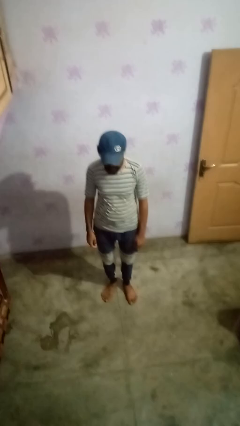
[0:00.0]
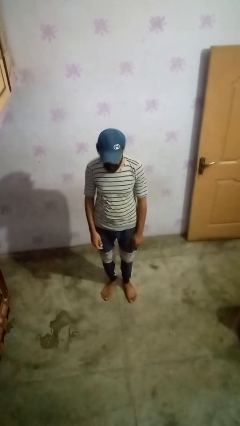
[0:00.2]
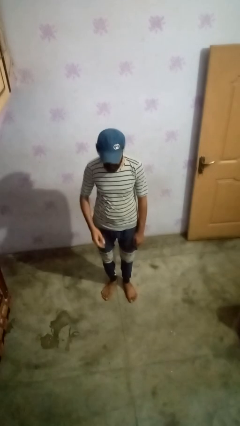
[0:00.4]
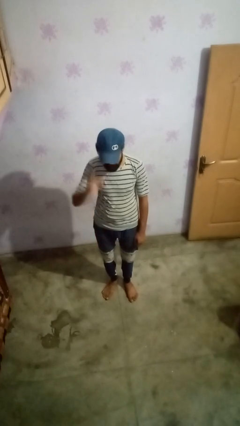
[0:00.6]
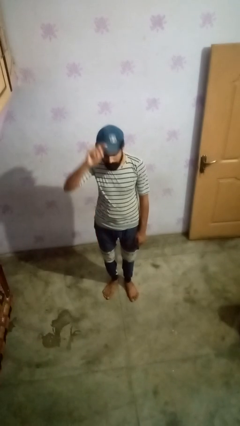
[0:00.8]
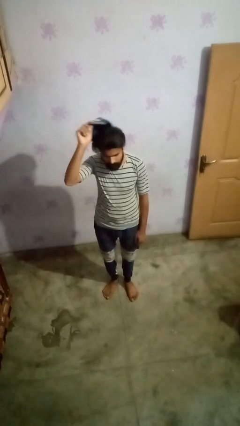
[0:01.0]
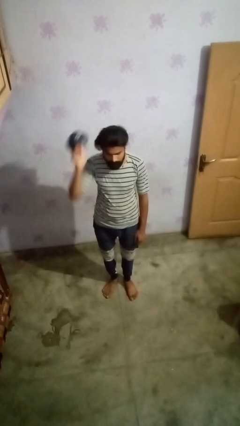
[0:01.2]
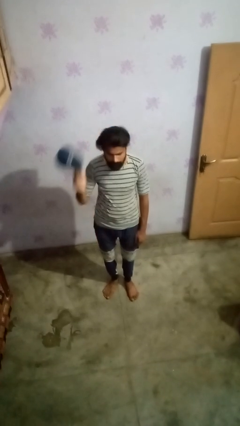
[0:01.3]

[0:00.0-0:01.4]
person takes off hat

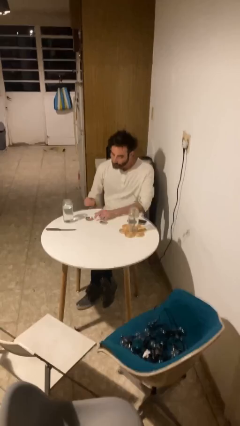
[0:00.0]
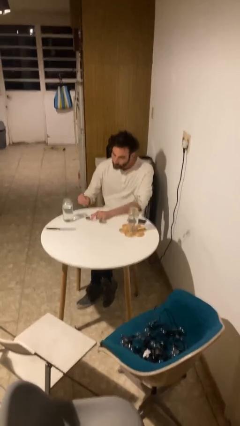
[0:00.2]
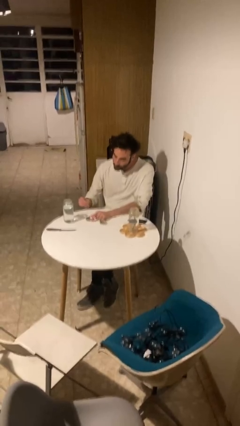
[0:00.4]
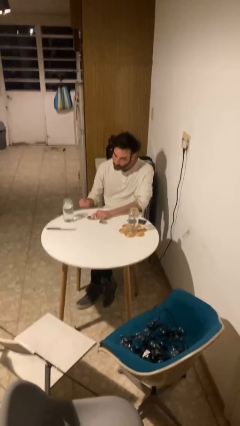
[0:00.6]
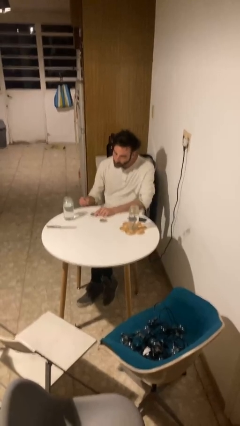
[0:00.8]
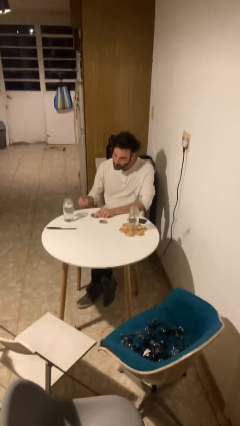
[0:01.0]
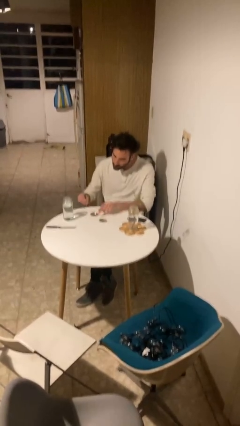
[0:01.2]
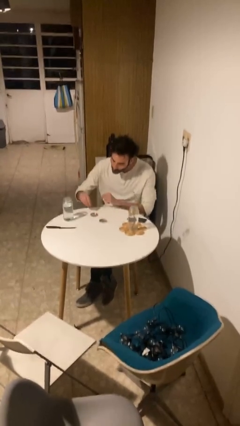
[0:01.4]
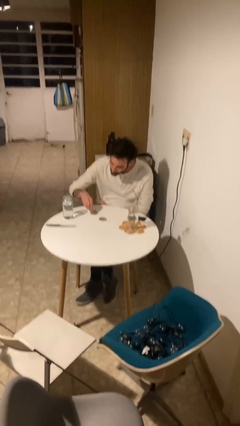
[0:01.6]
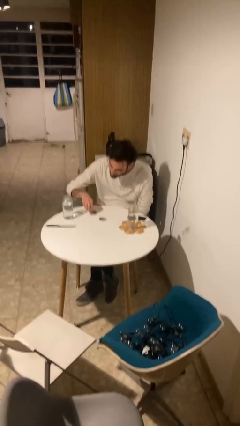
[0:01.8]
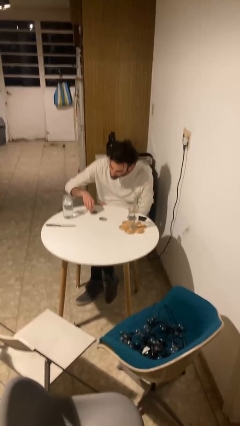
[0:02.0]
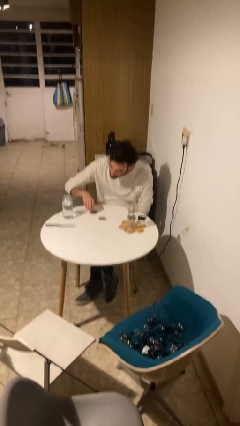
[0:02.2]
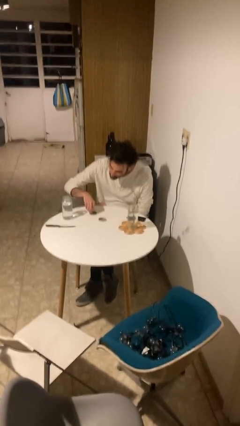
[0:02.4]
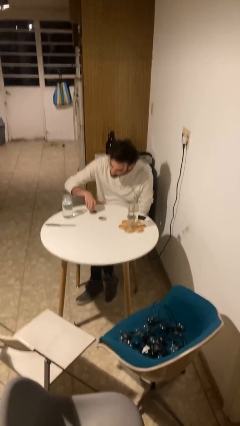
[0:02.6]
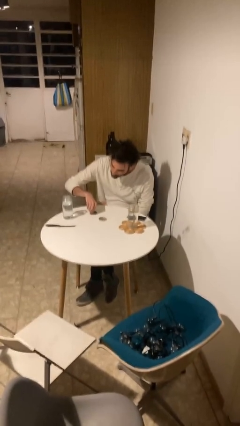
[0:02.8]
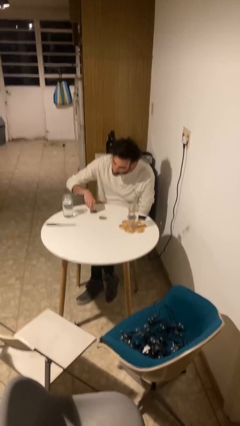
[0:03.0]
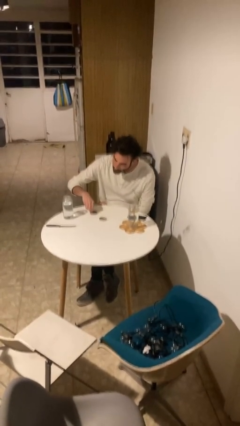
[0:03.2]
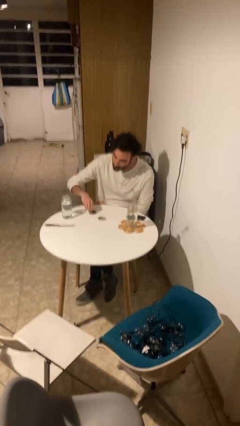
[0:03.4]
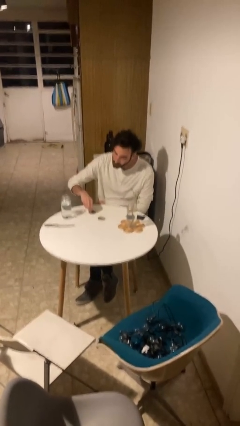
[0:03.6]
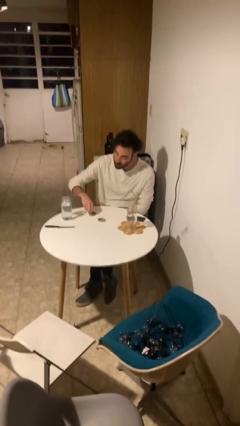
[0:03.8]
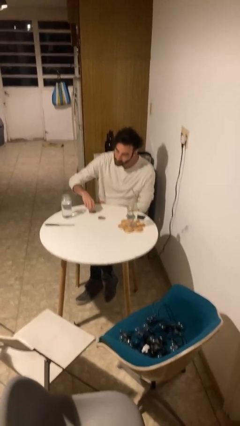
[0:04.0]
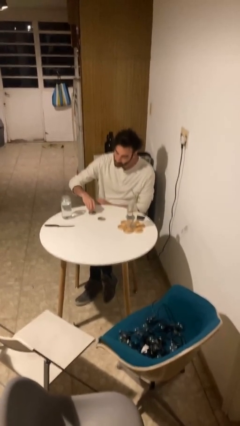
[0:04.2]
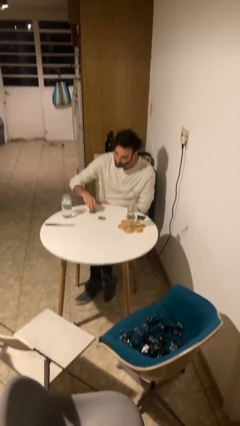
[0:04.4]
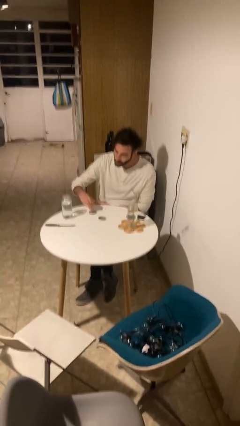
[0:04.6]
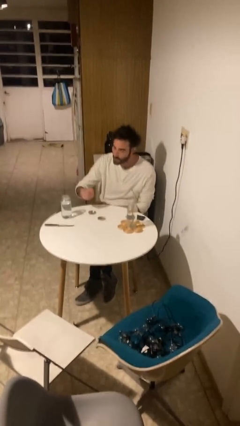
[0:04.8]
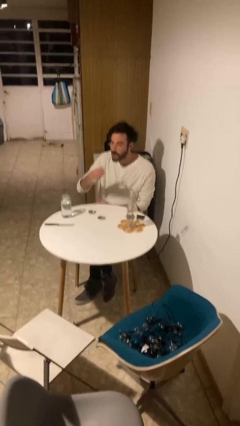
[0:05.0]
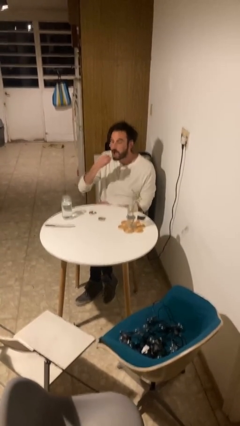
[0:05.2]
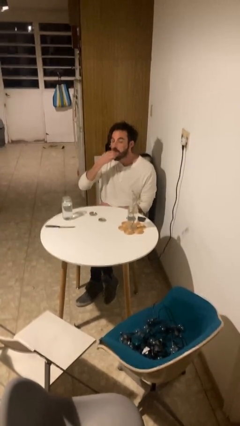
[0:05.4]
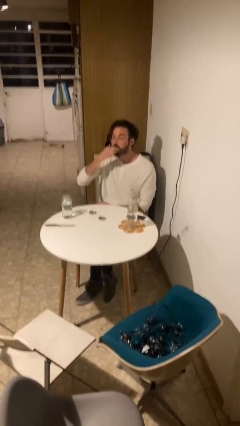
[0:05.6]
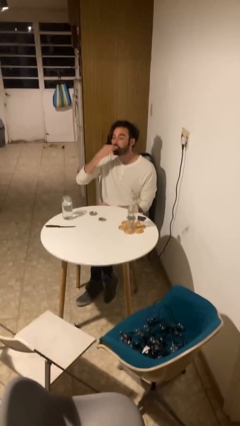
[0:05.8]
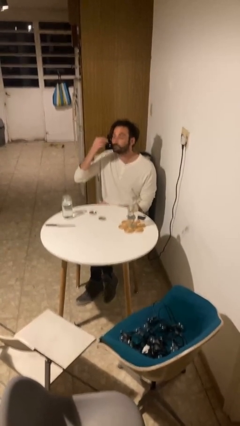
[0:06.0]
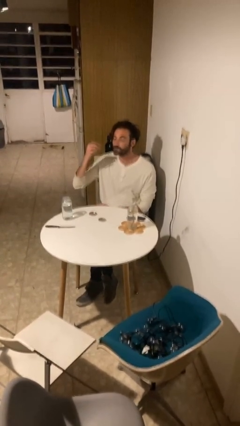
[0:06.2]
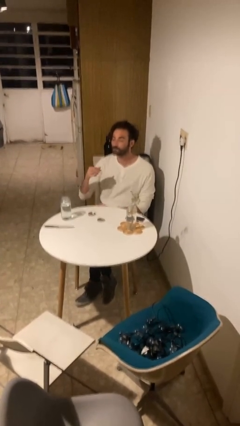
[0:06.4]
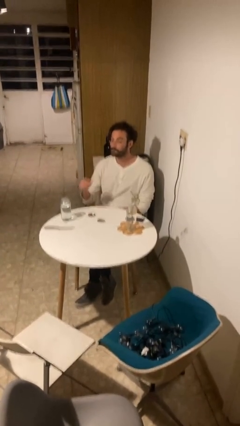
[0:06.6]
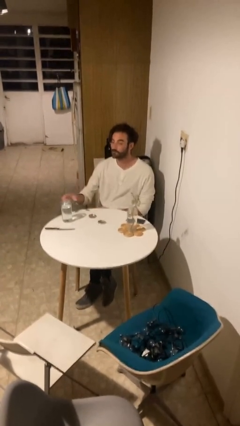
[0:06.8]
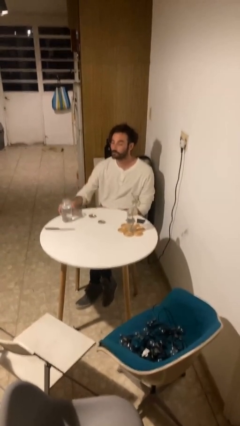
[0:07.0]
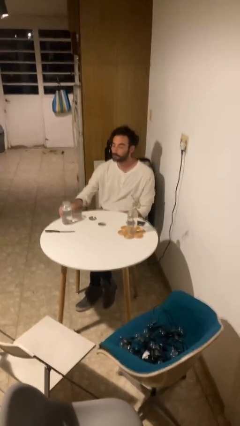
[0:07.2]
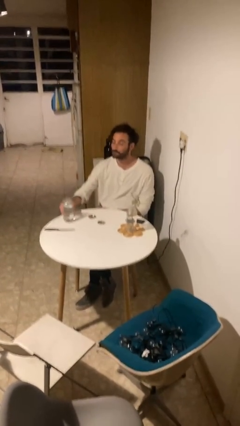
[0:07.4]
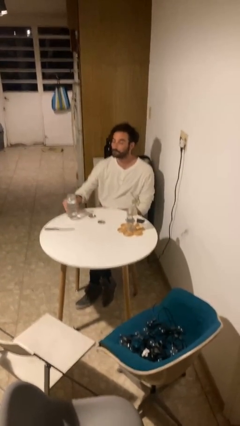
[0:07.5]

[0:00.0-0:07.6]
person takes medicine pills

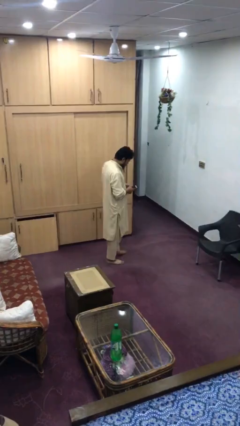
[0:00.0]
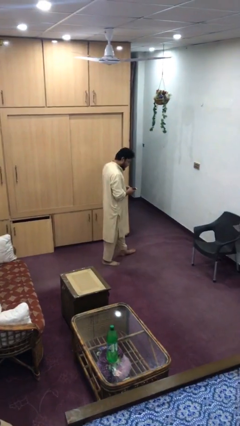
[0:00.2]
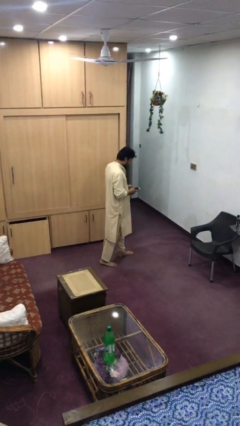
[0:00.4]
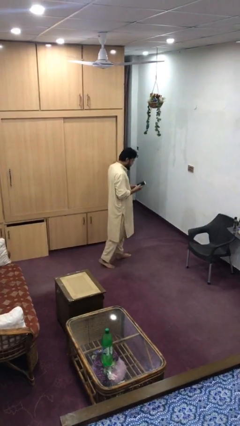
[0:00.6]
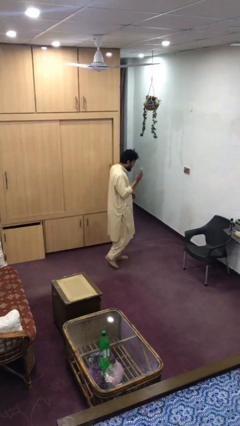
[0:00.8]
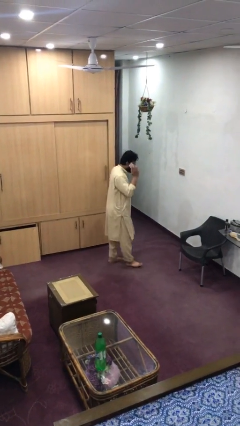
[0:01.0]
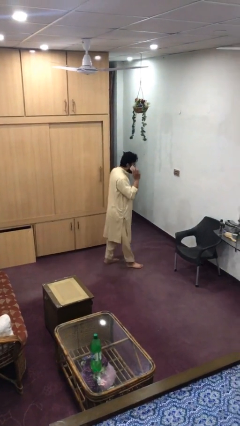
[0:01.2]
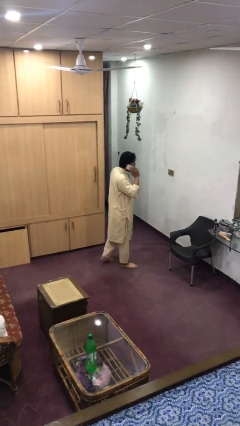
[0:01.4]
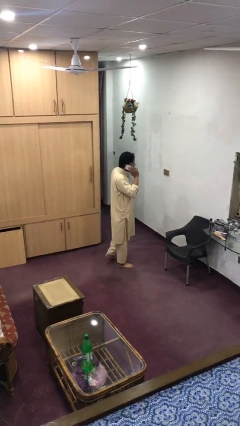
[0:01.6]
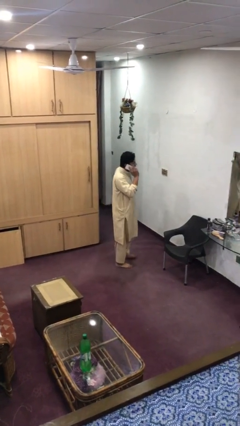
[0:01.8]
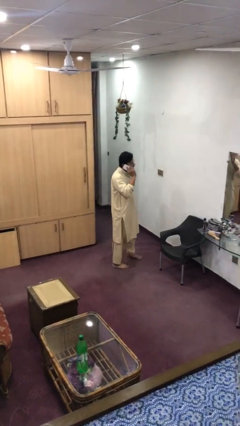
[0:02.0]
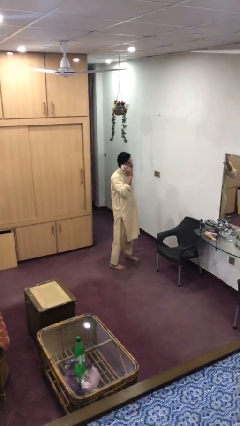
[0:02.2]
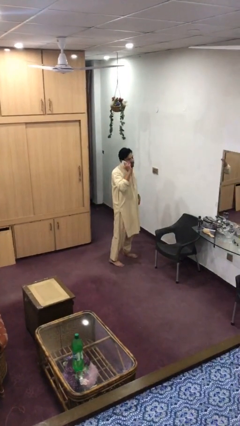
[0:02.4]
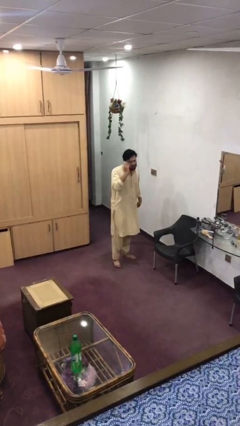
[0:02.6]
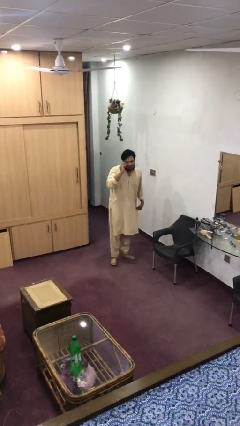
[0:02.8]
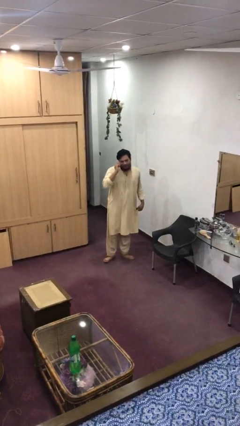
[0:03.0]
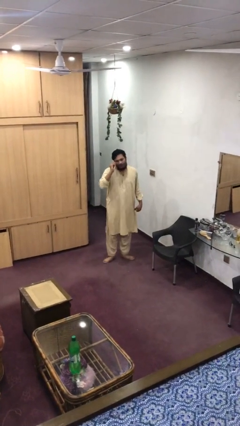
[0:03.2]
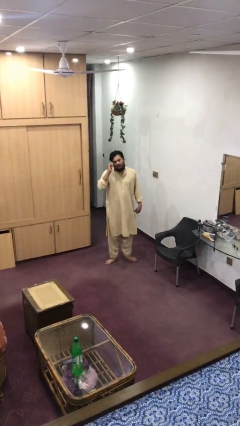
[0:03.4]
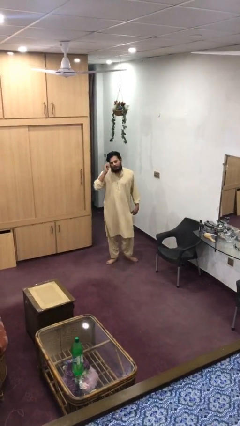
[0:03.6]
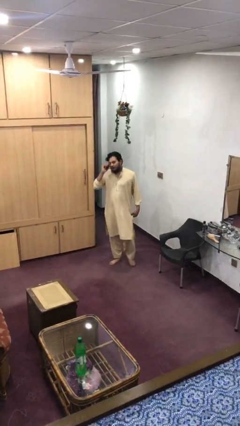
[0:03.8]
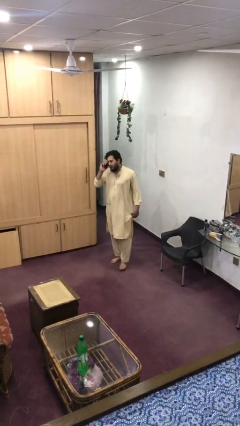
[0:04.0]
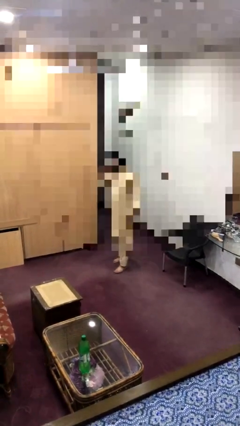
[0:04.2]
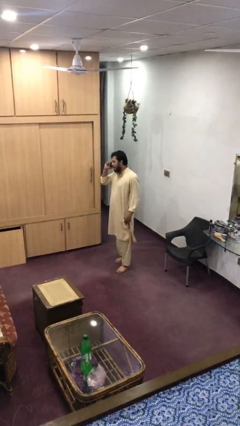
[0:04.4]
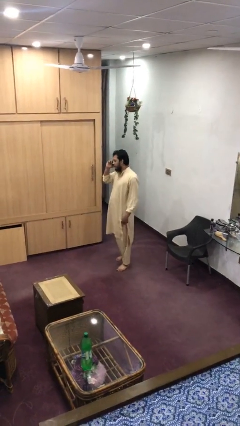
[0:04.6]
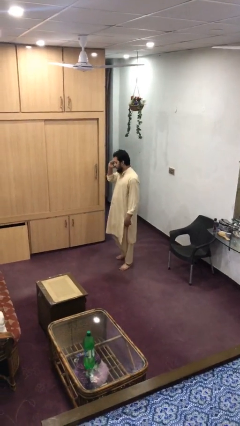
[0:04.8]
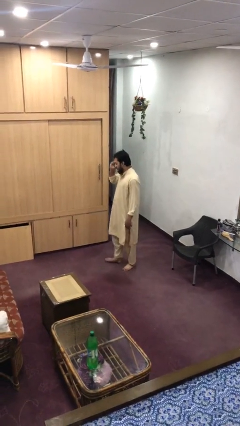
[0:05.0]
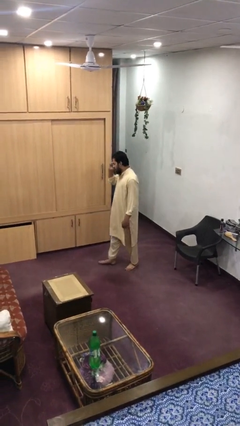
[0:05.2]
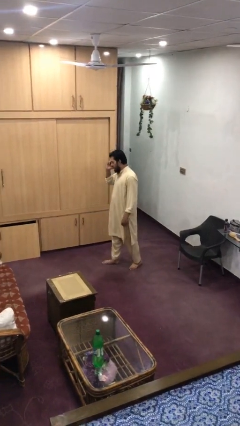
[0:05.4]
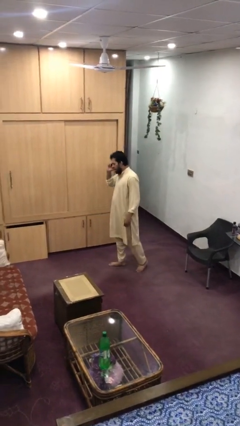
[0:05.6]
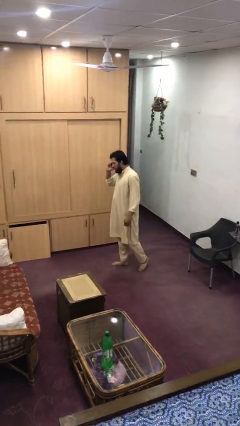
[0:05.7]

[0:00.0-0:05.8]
person talks on phone

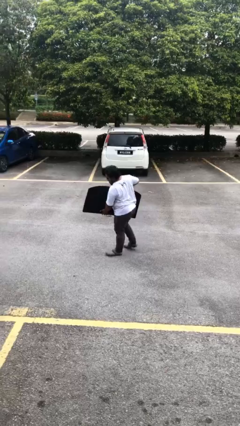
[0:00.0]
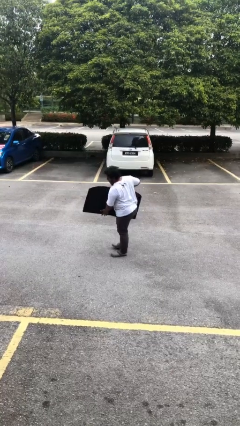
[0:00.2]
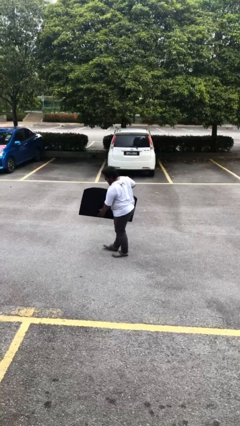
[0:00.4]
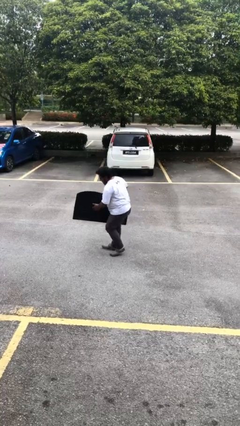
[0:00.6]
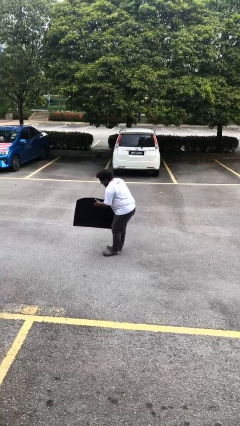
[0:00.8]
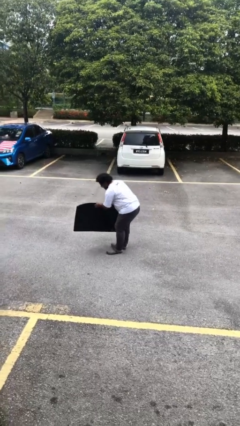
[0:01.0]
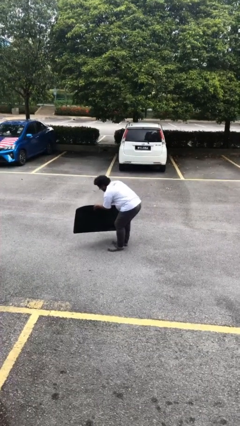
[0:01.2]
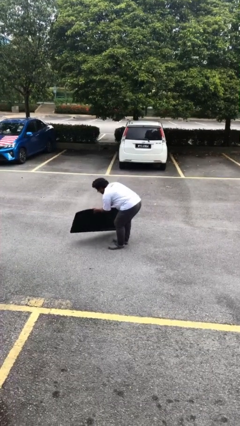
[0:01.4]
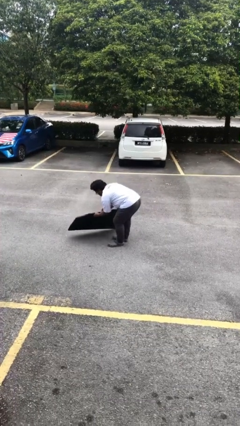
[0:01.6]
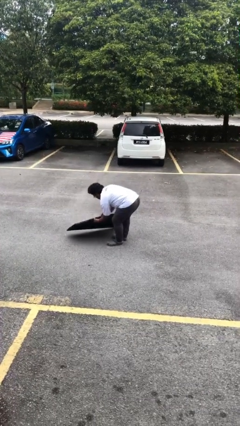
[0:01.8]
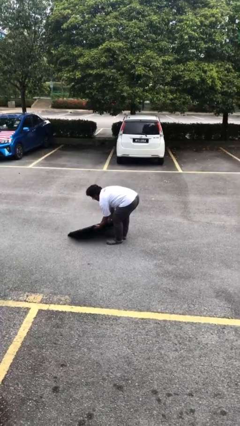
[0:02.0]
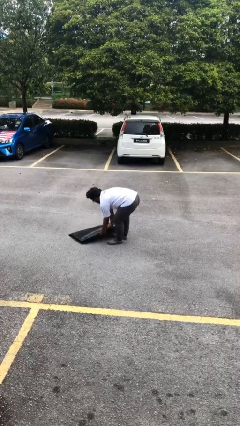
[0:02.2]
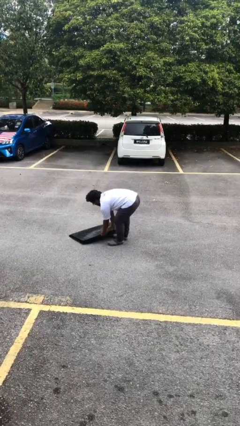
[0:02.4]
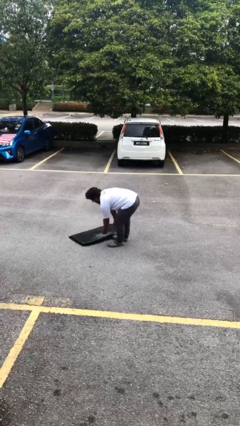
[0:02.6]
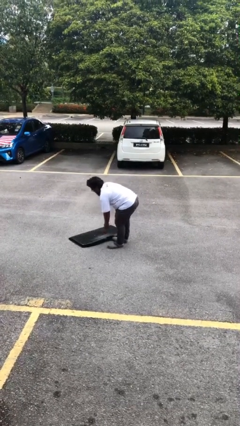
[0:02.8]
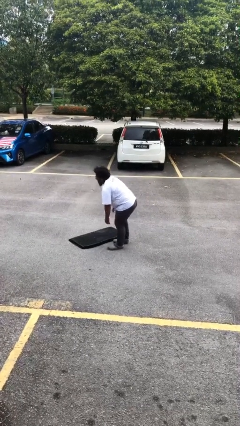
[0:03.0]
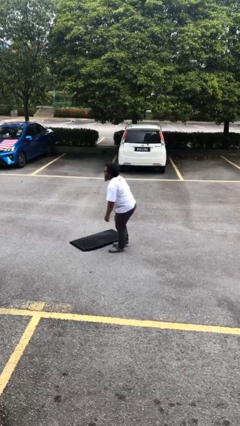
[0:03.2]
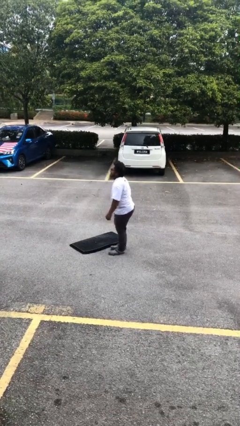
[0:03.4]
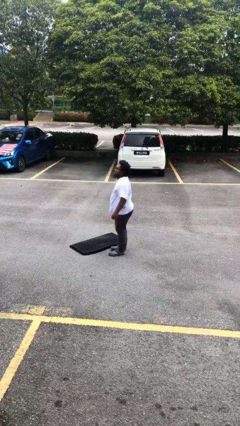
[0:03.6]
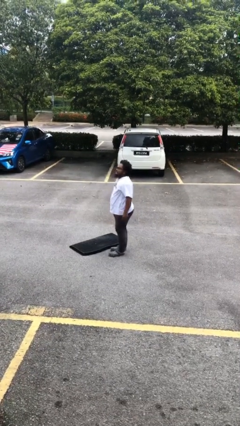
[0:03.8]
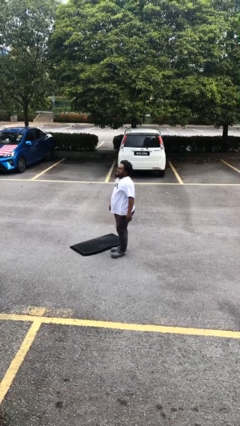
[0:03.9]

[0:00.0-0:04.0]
person puts down object on floor
